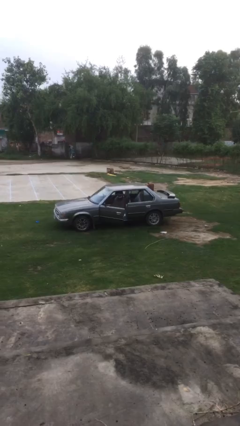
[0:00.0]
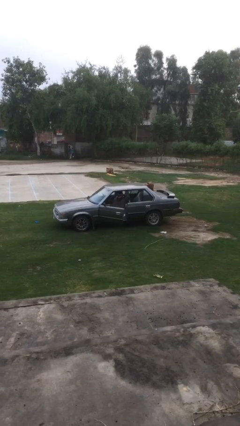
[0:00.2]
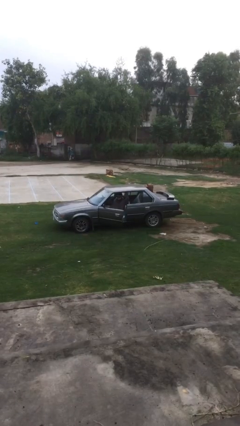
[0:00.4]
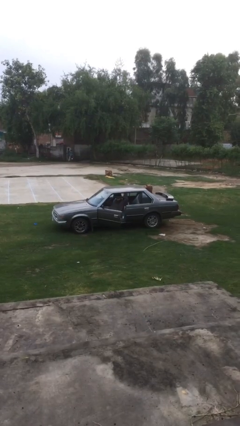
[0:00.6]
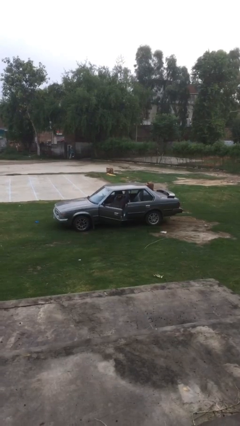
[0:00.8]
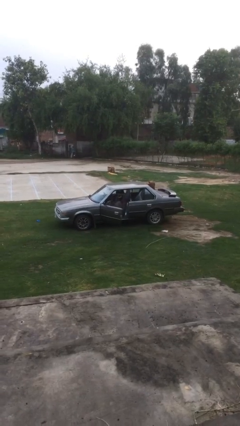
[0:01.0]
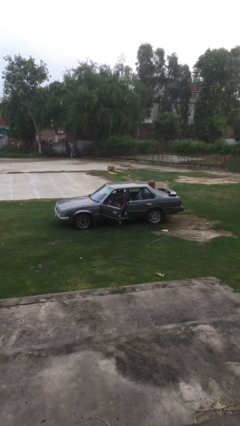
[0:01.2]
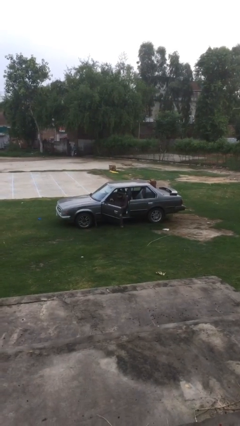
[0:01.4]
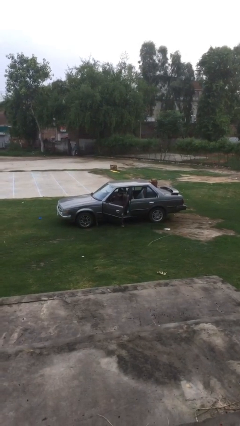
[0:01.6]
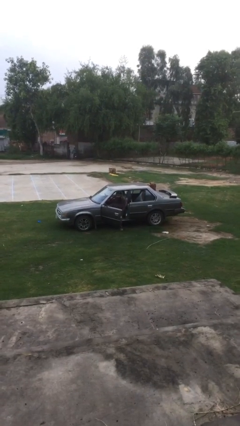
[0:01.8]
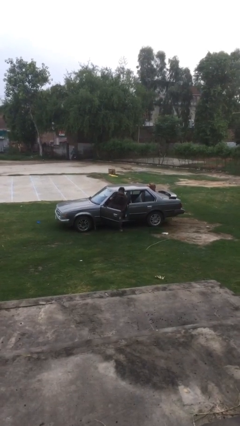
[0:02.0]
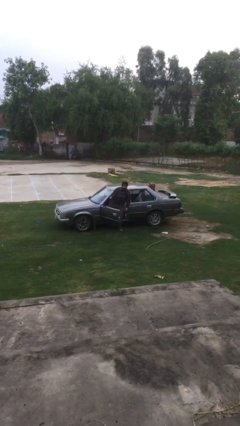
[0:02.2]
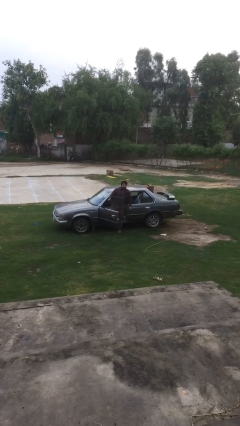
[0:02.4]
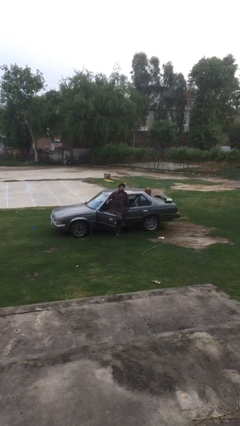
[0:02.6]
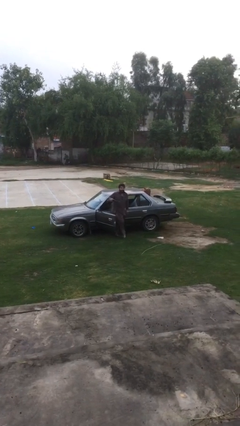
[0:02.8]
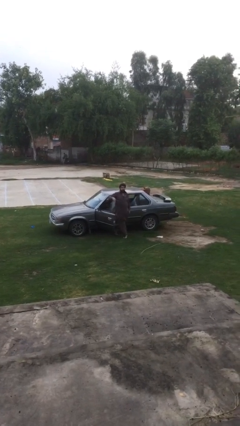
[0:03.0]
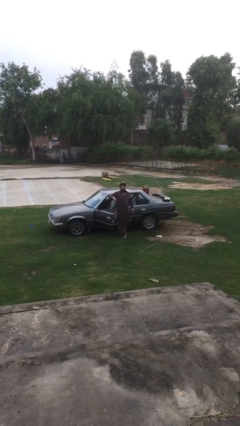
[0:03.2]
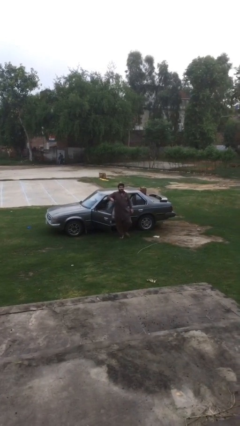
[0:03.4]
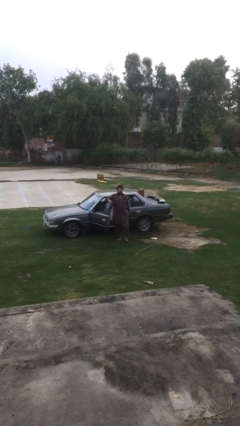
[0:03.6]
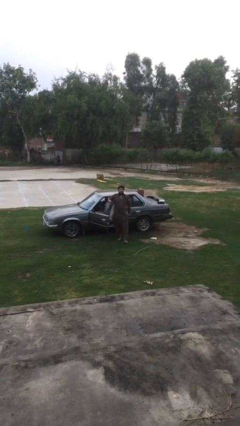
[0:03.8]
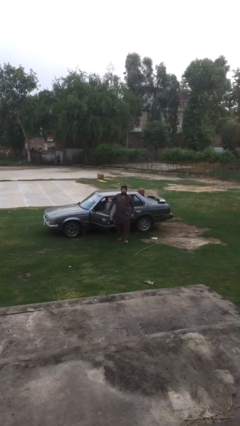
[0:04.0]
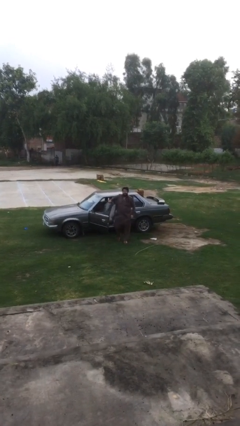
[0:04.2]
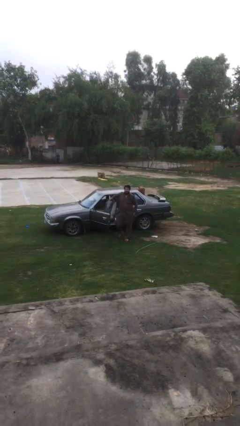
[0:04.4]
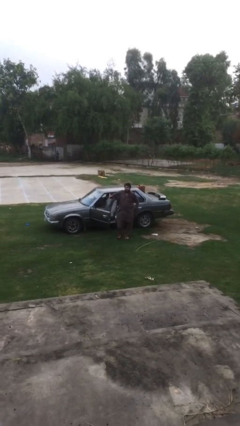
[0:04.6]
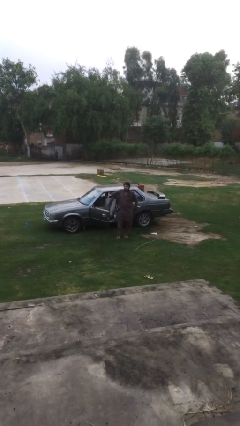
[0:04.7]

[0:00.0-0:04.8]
person exits car

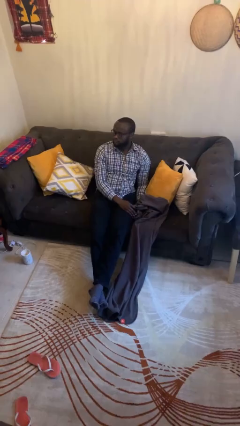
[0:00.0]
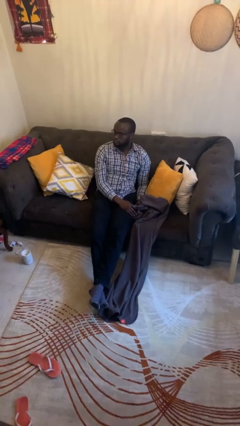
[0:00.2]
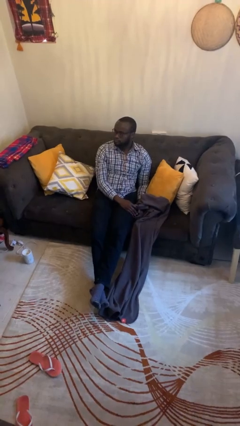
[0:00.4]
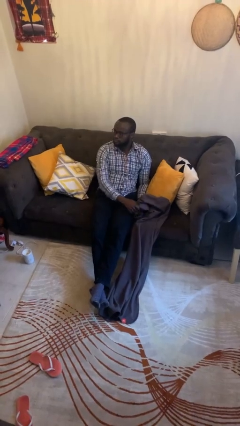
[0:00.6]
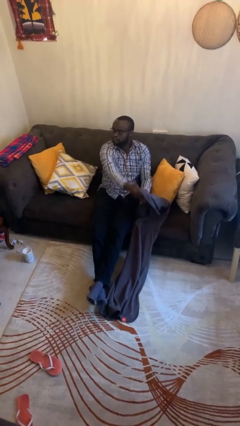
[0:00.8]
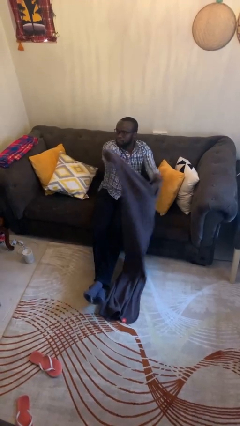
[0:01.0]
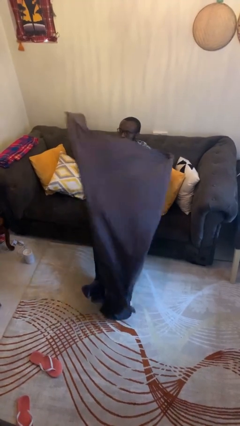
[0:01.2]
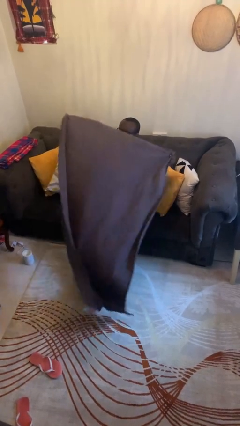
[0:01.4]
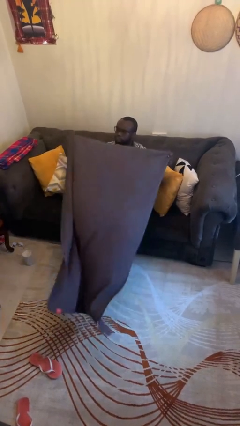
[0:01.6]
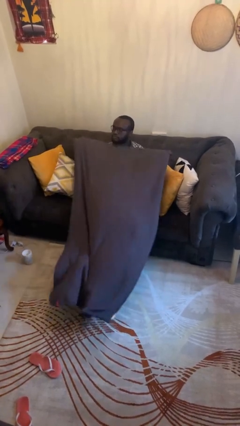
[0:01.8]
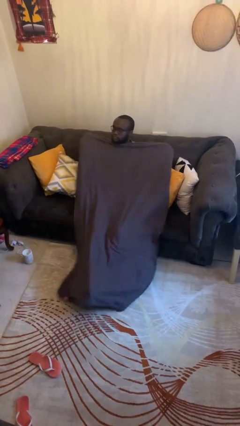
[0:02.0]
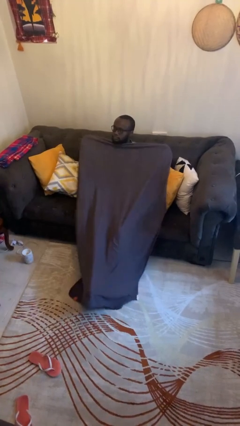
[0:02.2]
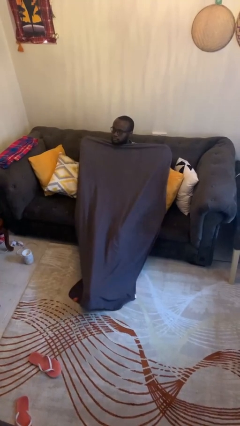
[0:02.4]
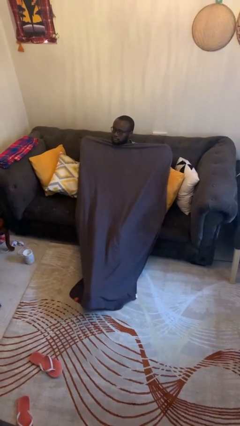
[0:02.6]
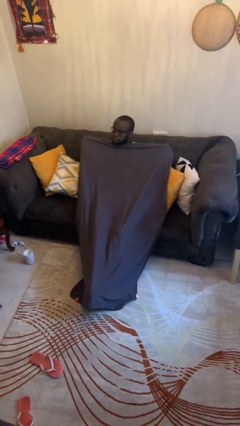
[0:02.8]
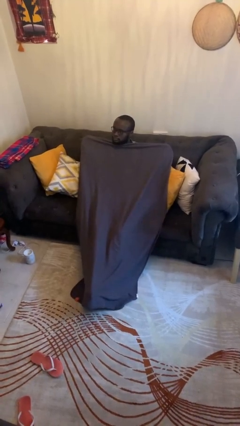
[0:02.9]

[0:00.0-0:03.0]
person covers with blanket

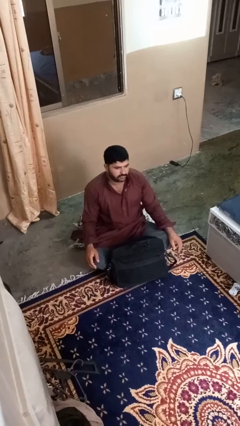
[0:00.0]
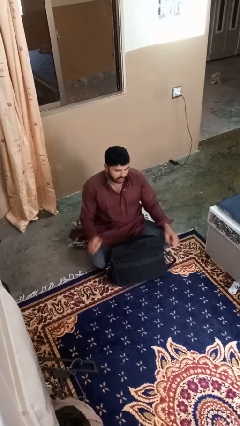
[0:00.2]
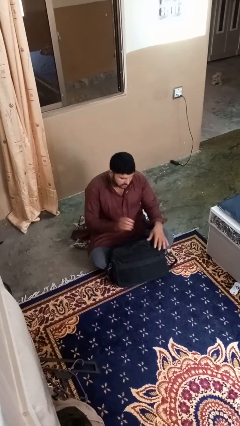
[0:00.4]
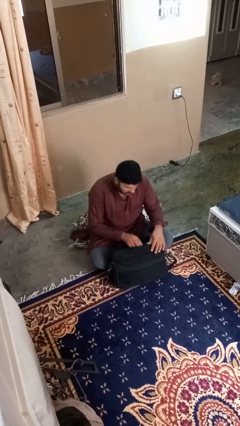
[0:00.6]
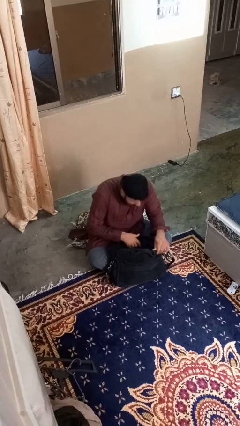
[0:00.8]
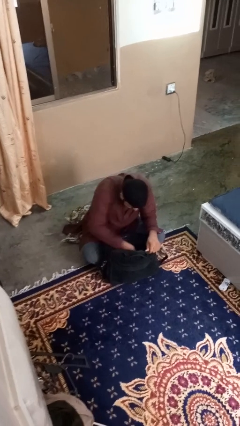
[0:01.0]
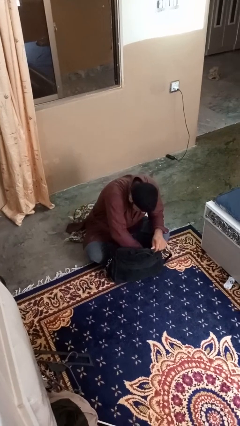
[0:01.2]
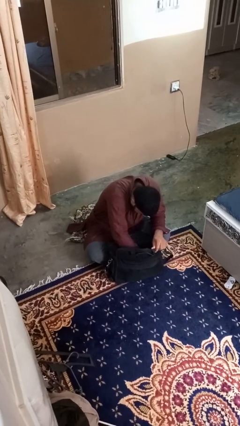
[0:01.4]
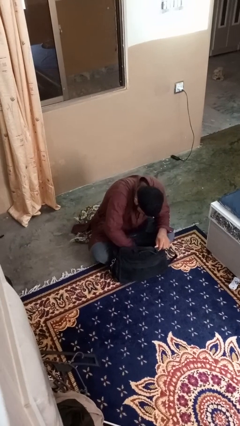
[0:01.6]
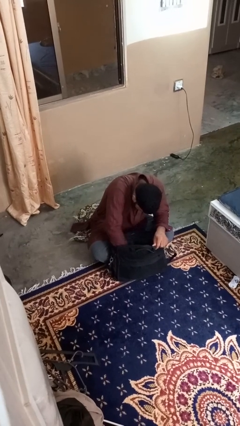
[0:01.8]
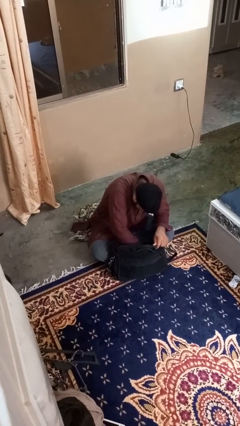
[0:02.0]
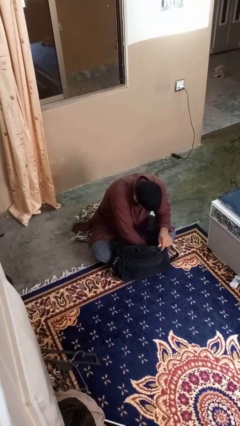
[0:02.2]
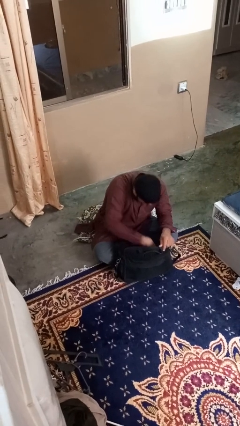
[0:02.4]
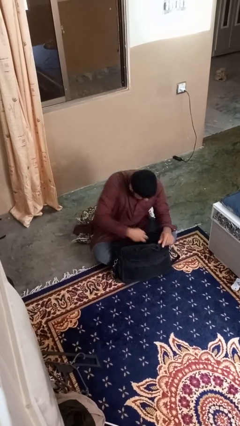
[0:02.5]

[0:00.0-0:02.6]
person searches in bag

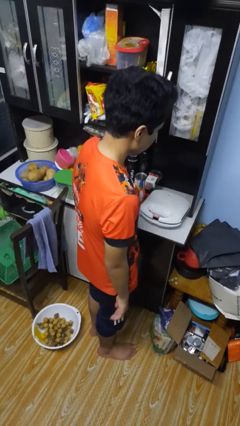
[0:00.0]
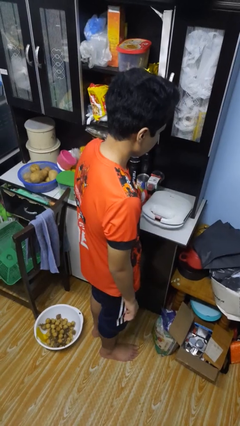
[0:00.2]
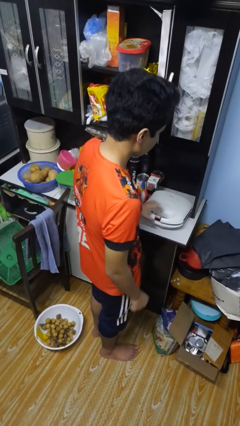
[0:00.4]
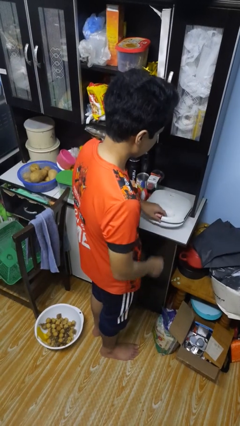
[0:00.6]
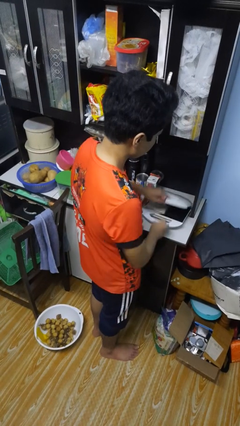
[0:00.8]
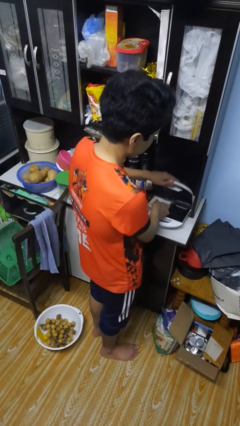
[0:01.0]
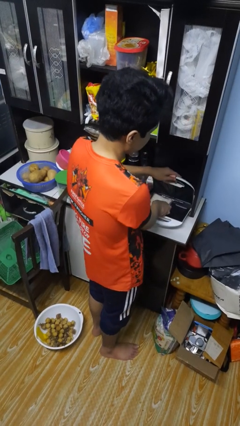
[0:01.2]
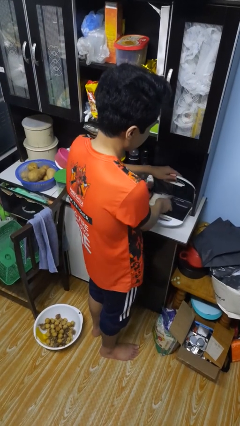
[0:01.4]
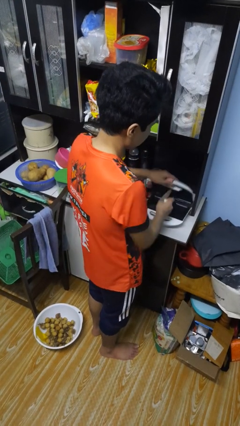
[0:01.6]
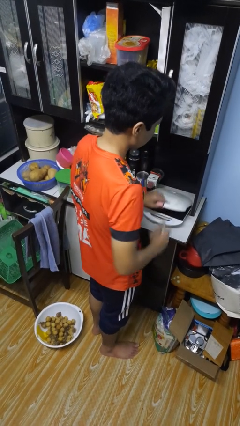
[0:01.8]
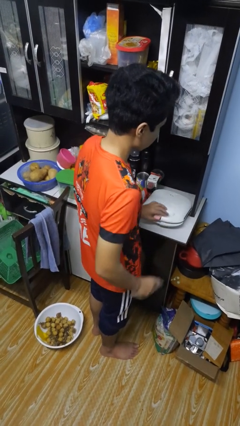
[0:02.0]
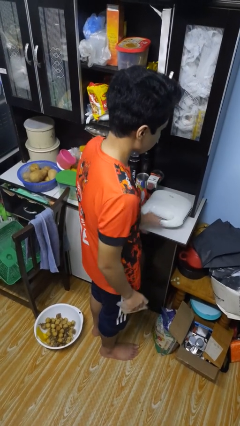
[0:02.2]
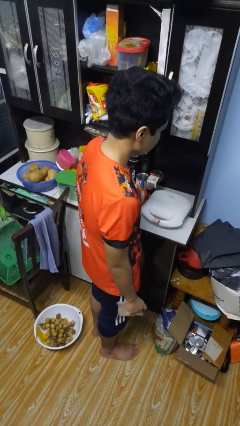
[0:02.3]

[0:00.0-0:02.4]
person takes object from toaster

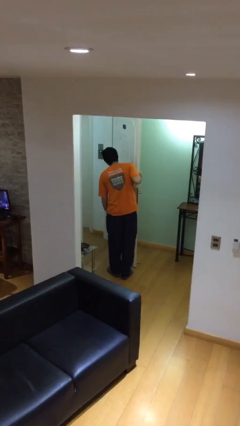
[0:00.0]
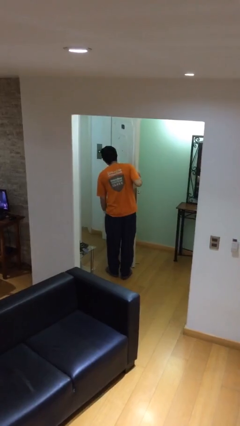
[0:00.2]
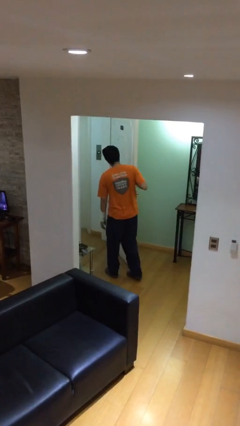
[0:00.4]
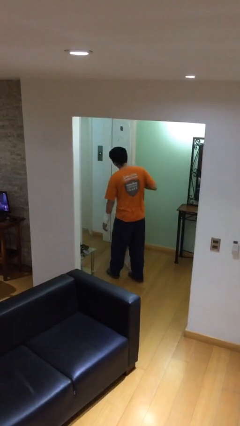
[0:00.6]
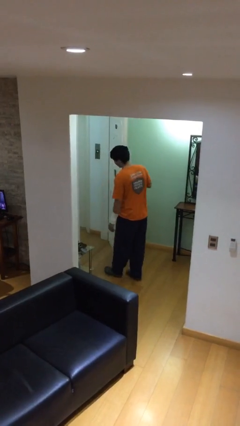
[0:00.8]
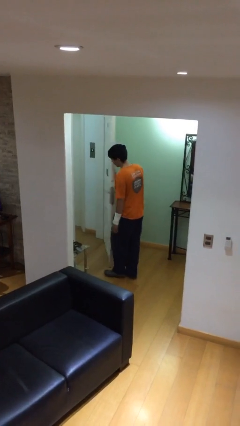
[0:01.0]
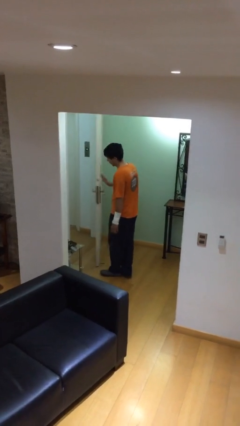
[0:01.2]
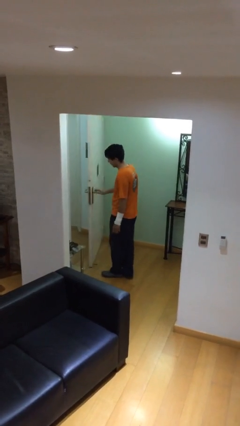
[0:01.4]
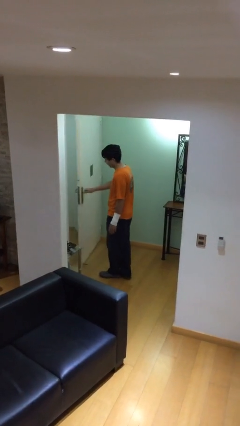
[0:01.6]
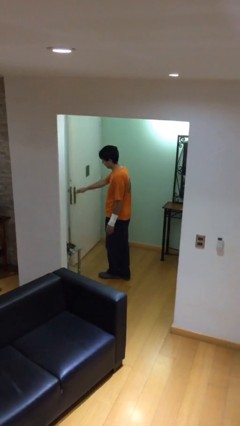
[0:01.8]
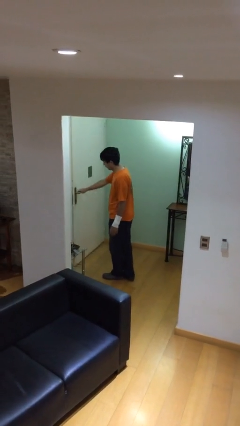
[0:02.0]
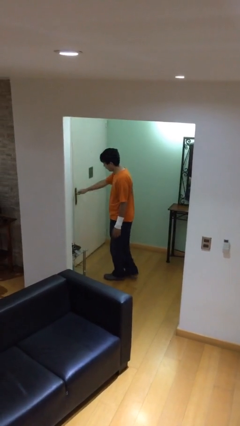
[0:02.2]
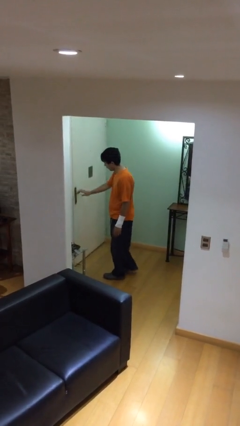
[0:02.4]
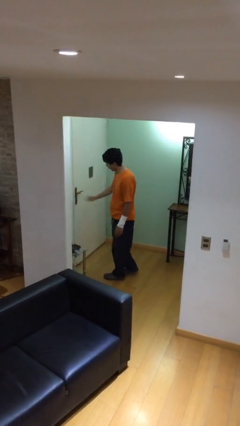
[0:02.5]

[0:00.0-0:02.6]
person closes facility door

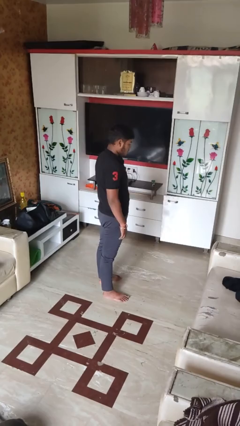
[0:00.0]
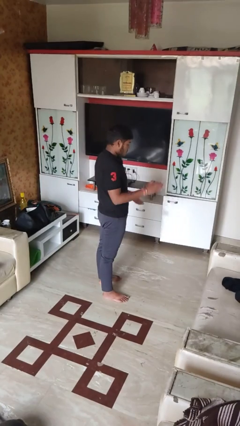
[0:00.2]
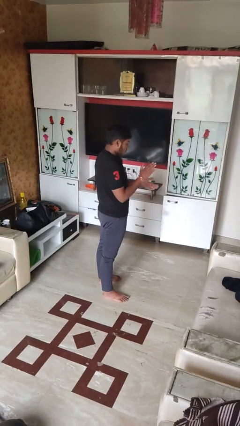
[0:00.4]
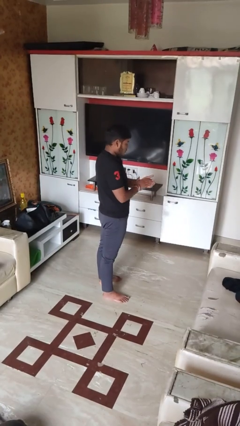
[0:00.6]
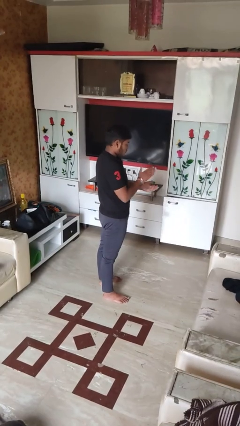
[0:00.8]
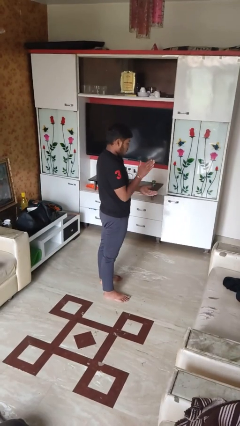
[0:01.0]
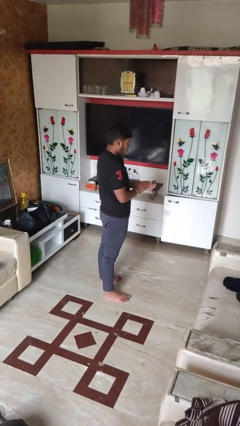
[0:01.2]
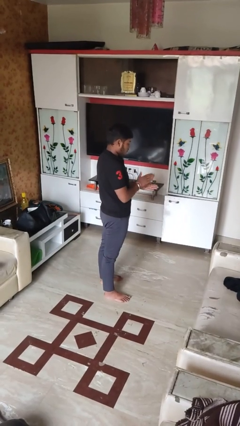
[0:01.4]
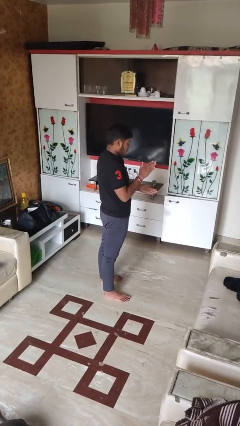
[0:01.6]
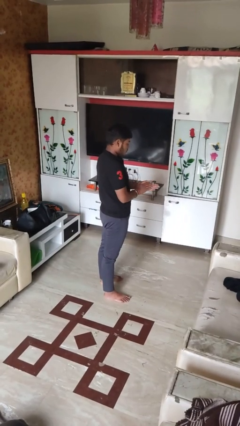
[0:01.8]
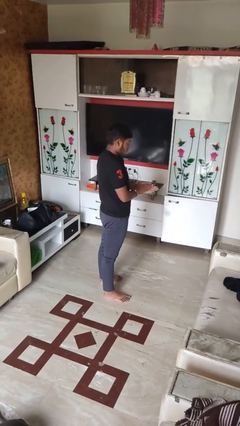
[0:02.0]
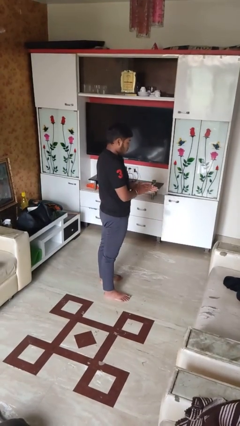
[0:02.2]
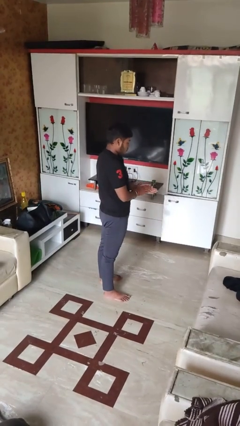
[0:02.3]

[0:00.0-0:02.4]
person claps hands
